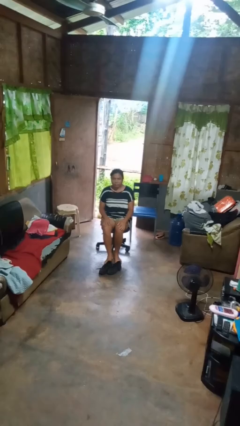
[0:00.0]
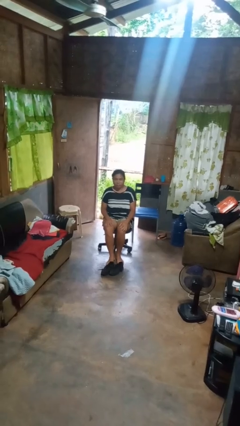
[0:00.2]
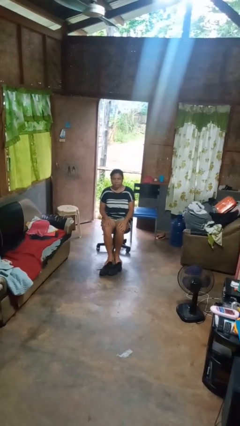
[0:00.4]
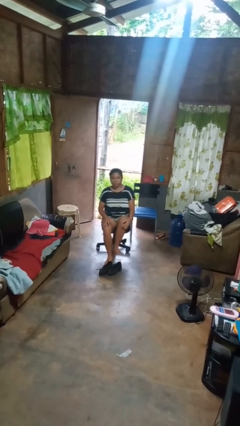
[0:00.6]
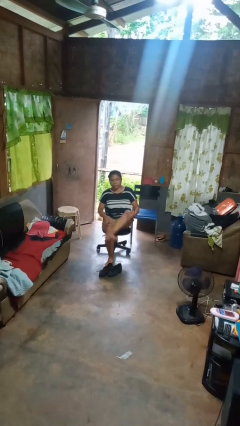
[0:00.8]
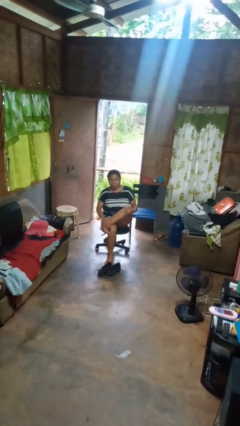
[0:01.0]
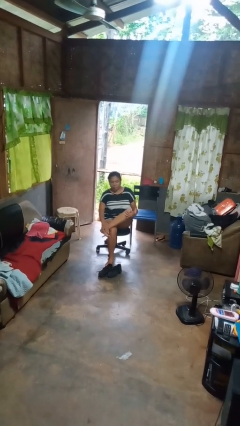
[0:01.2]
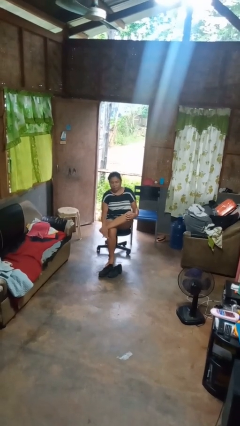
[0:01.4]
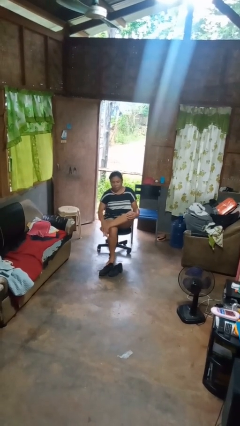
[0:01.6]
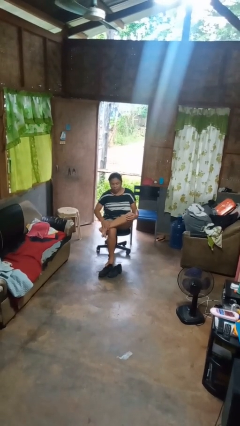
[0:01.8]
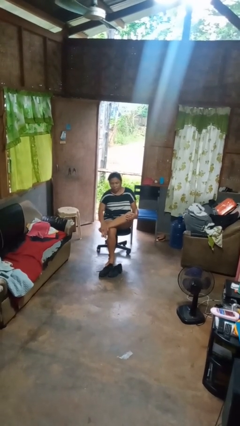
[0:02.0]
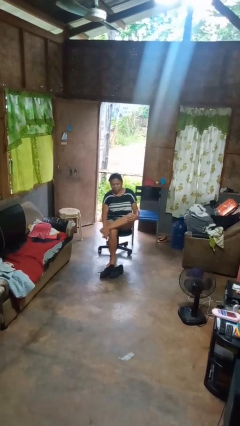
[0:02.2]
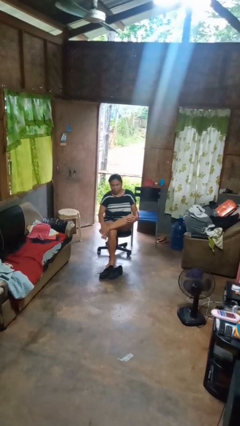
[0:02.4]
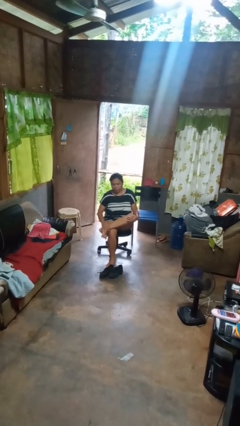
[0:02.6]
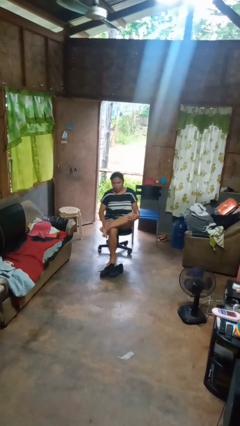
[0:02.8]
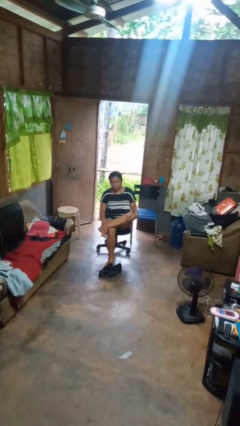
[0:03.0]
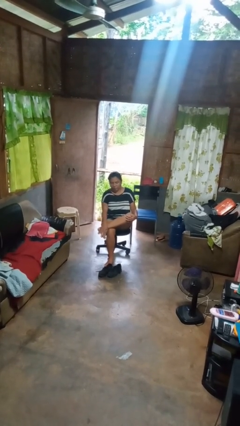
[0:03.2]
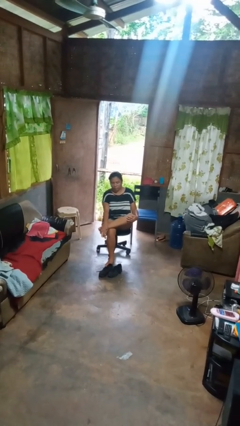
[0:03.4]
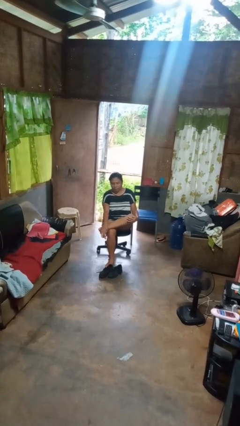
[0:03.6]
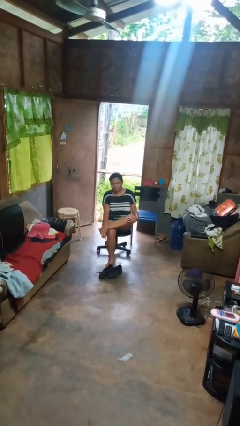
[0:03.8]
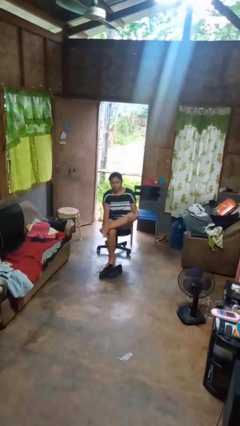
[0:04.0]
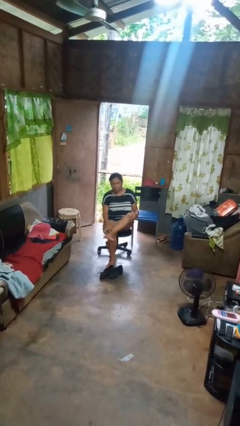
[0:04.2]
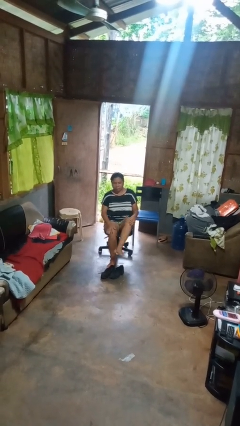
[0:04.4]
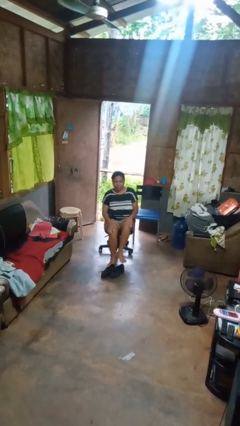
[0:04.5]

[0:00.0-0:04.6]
person rubs foot

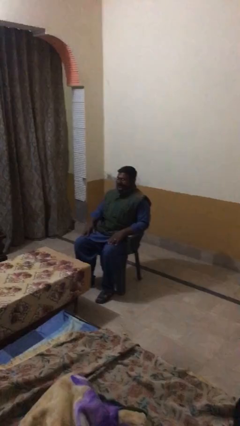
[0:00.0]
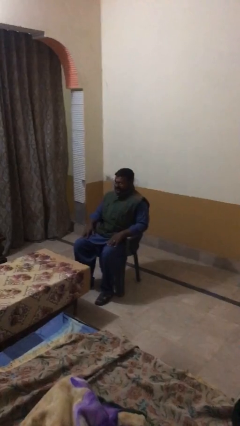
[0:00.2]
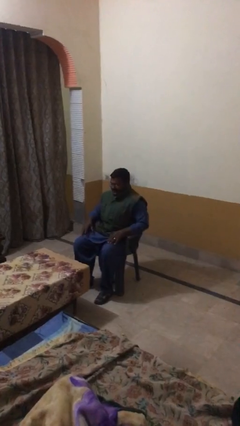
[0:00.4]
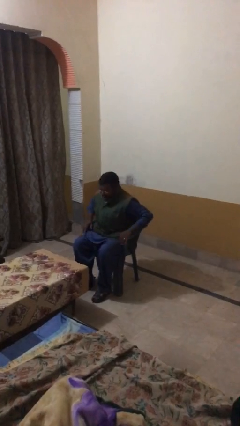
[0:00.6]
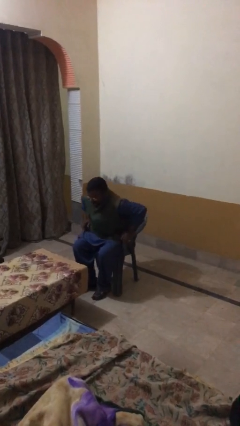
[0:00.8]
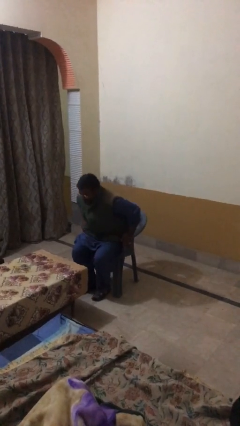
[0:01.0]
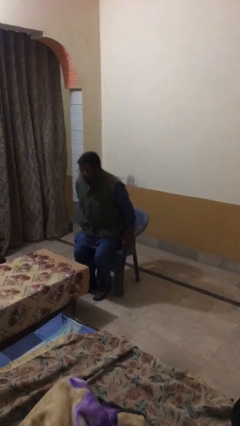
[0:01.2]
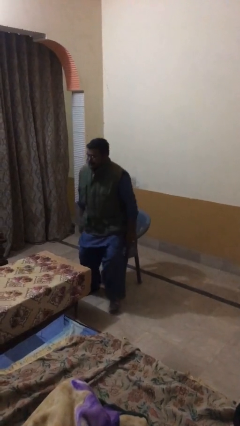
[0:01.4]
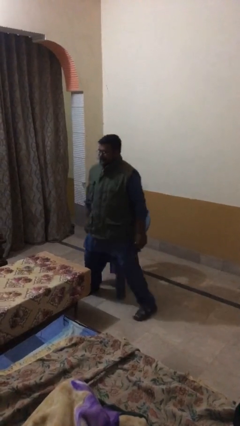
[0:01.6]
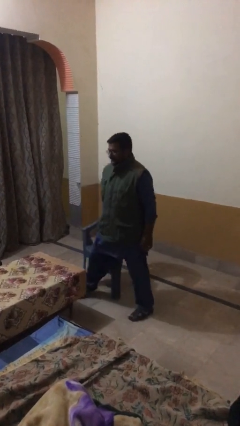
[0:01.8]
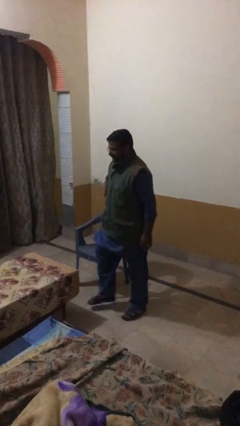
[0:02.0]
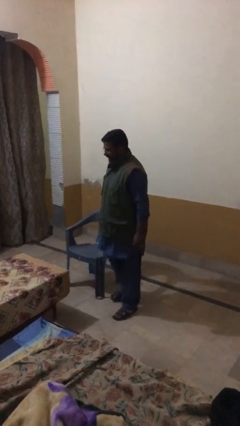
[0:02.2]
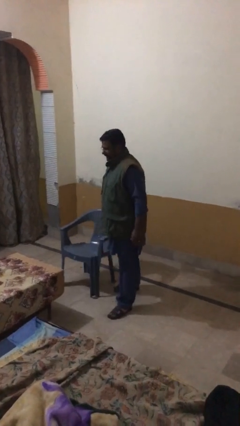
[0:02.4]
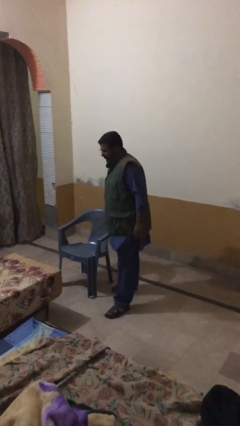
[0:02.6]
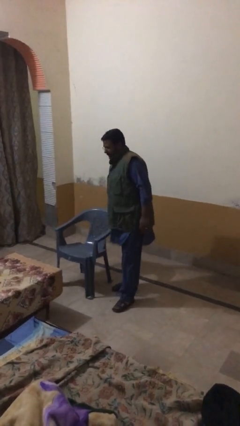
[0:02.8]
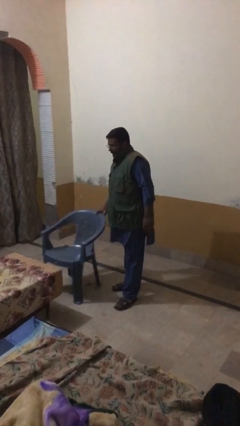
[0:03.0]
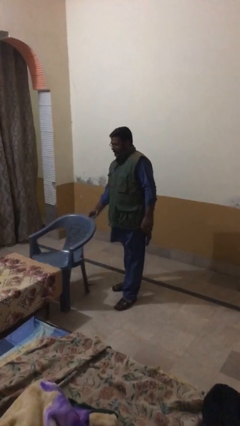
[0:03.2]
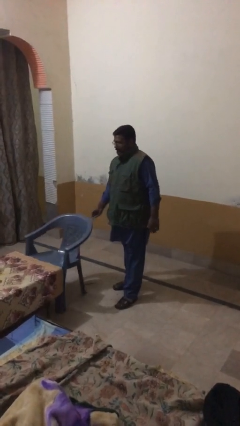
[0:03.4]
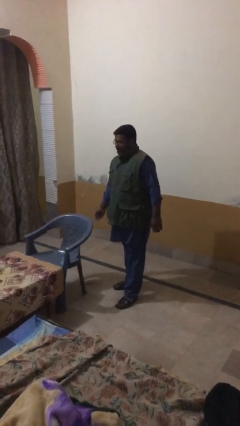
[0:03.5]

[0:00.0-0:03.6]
person stands up

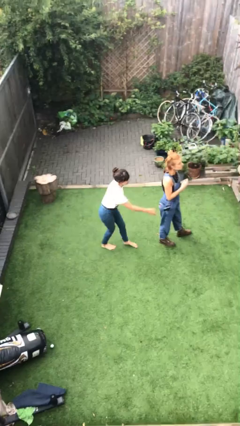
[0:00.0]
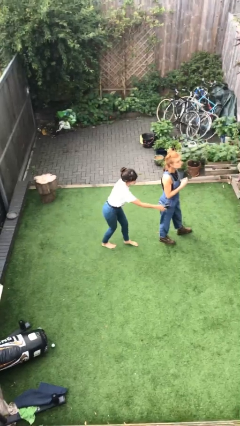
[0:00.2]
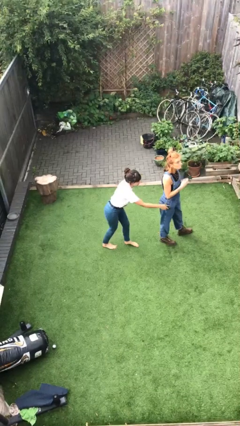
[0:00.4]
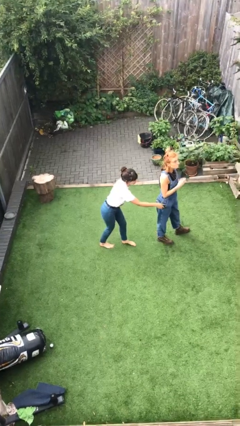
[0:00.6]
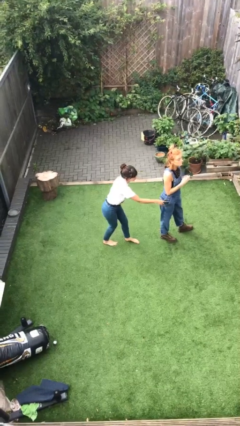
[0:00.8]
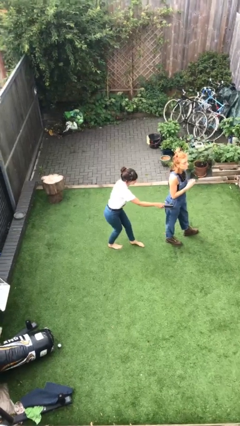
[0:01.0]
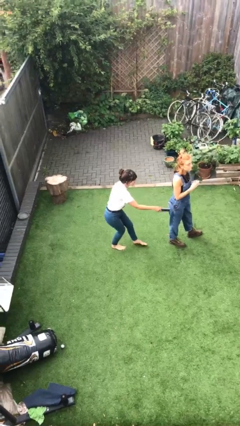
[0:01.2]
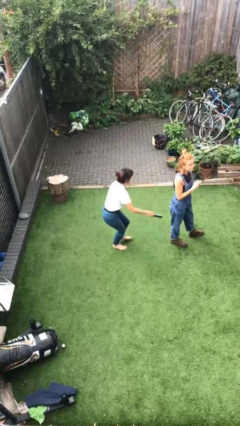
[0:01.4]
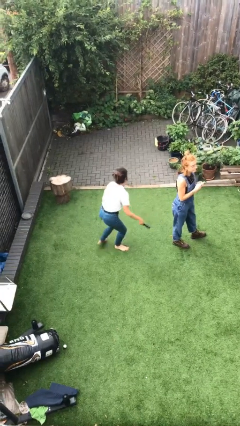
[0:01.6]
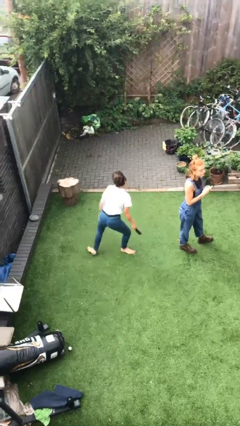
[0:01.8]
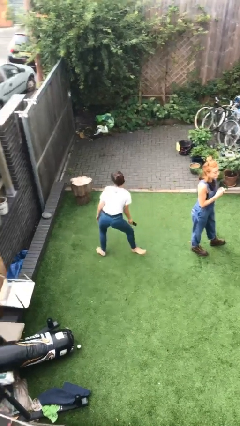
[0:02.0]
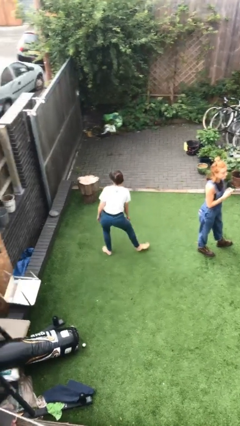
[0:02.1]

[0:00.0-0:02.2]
person steals object from person

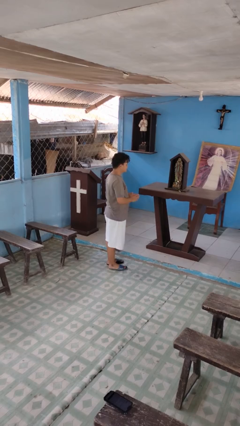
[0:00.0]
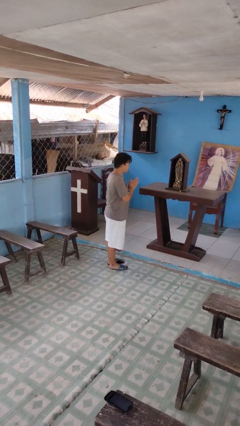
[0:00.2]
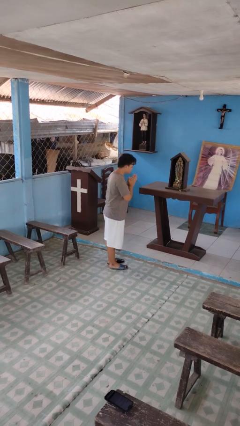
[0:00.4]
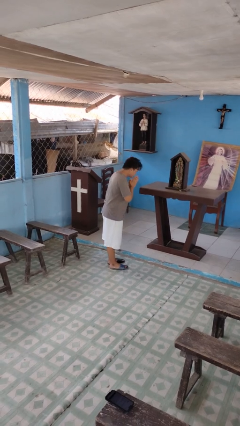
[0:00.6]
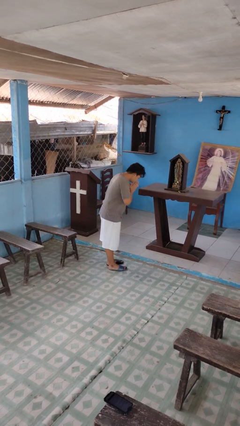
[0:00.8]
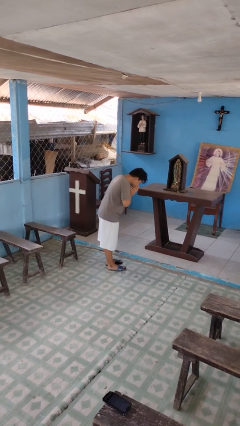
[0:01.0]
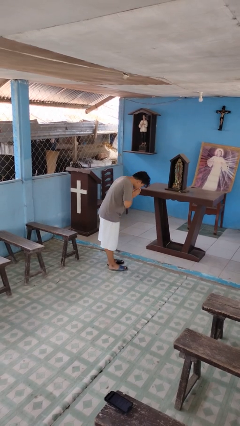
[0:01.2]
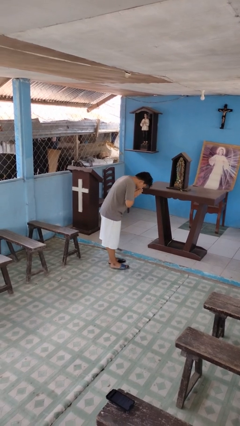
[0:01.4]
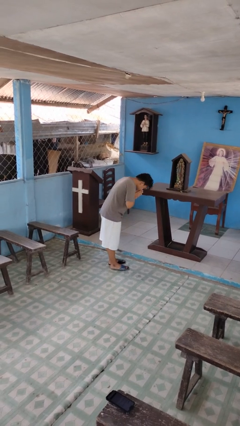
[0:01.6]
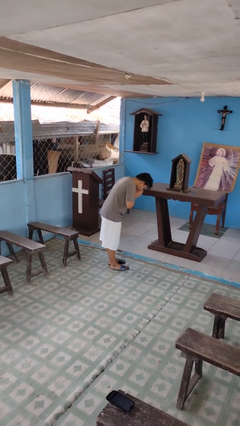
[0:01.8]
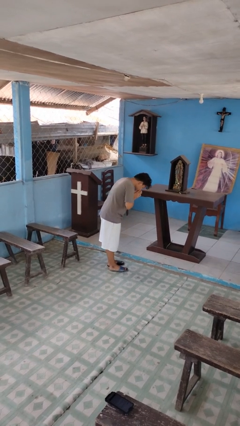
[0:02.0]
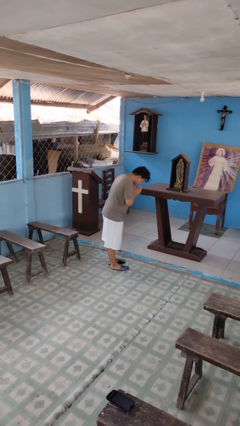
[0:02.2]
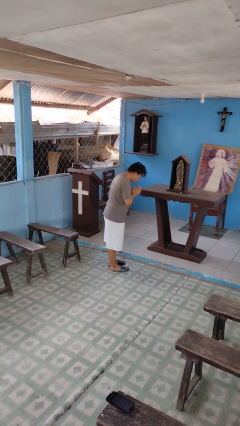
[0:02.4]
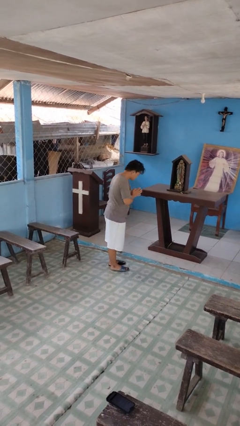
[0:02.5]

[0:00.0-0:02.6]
person prays

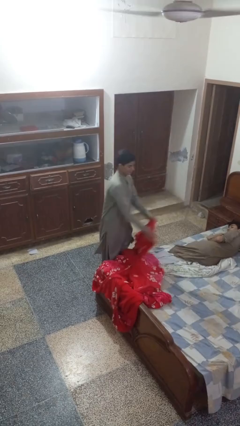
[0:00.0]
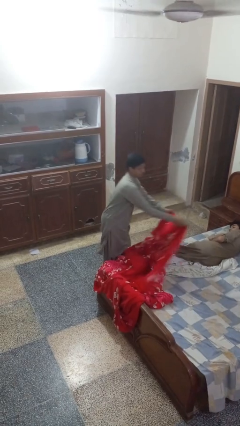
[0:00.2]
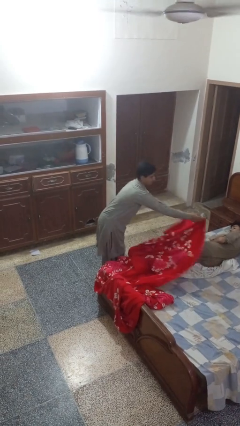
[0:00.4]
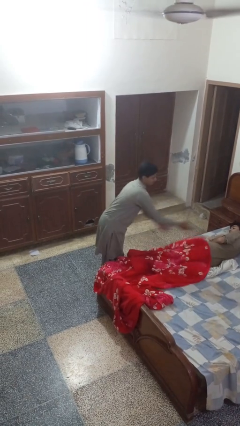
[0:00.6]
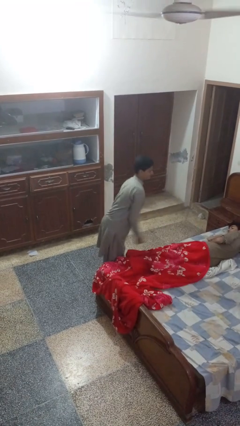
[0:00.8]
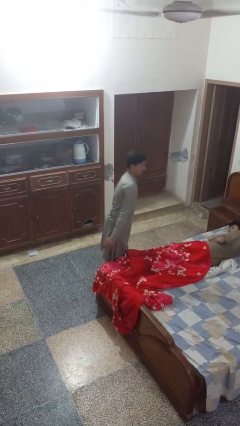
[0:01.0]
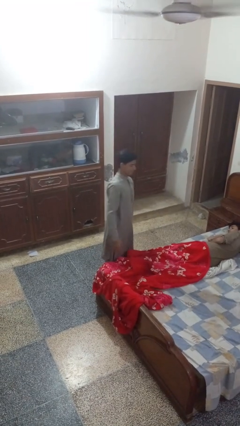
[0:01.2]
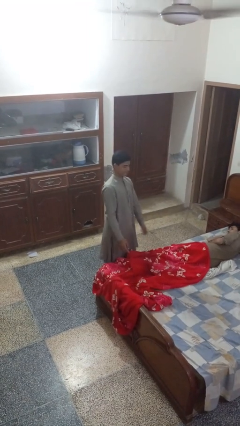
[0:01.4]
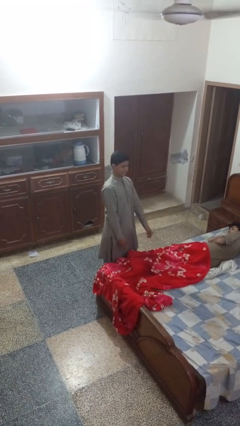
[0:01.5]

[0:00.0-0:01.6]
person covers friend with blanket

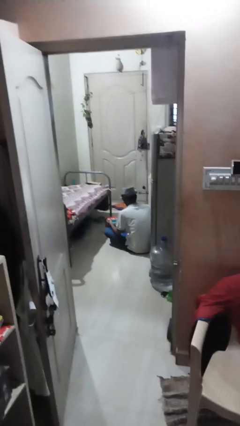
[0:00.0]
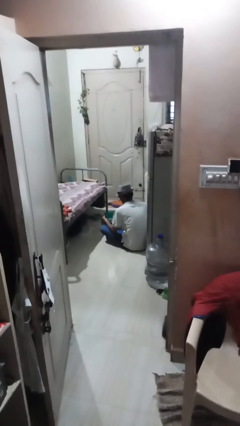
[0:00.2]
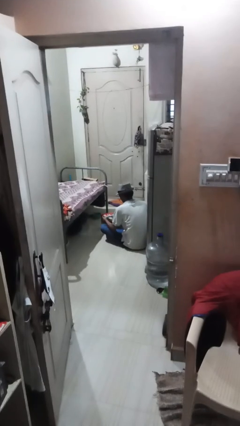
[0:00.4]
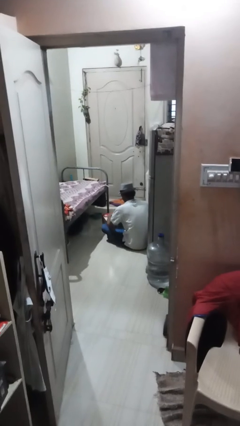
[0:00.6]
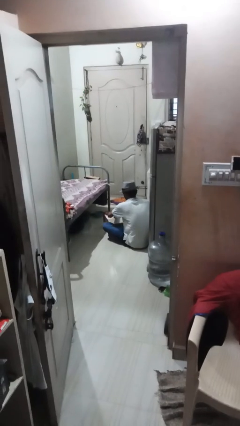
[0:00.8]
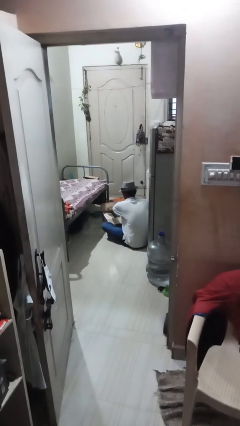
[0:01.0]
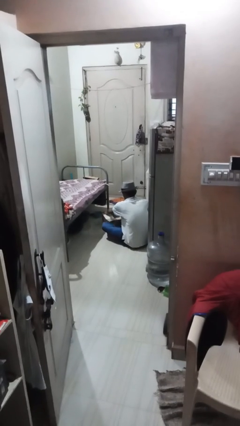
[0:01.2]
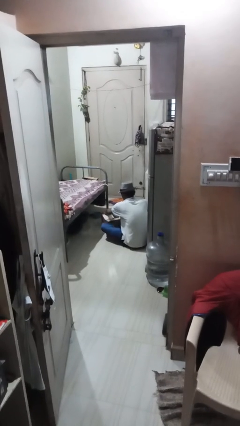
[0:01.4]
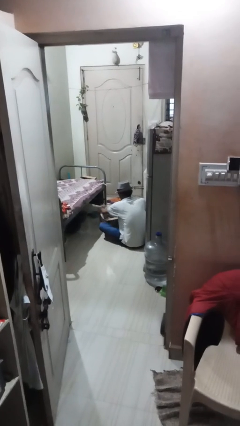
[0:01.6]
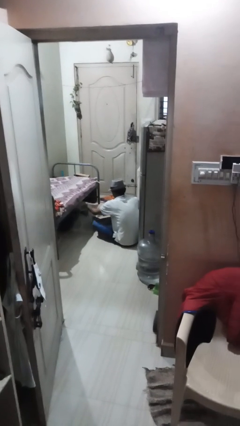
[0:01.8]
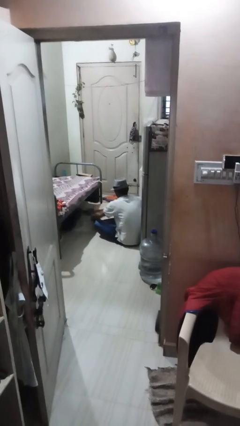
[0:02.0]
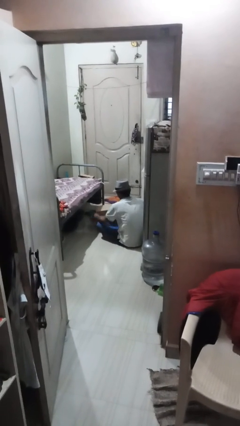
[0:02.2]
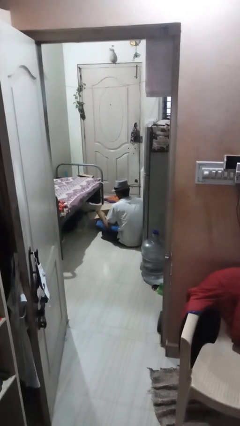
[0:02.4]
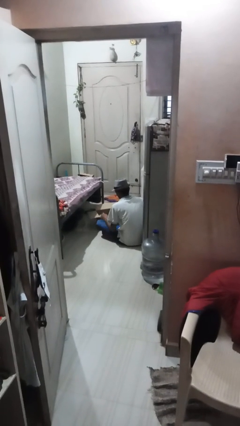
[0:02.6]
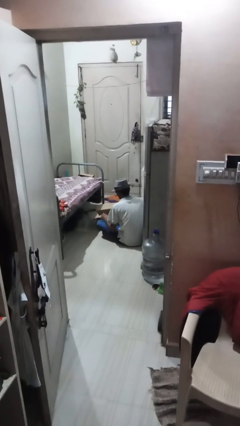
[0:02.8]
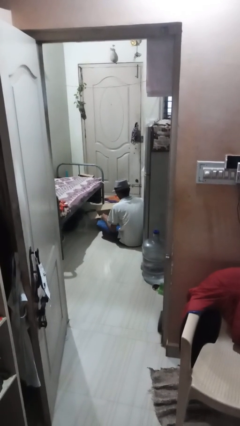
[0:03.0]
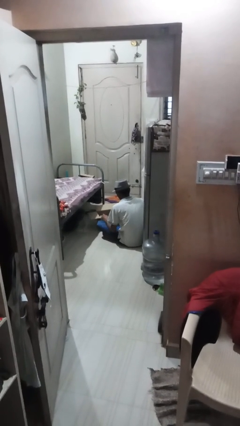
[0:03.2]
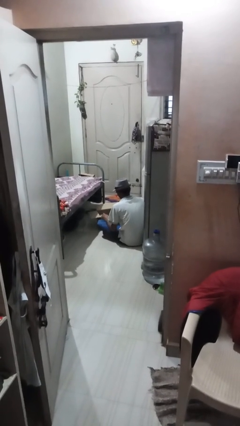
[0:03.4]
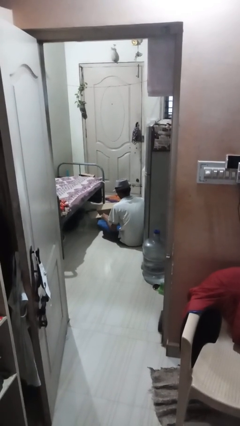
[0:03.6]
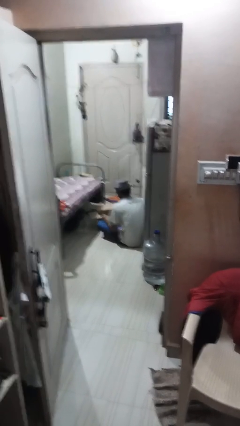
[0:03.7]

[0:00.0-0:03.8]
person opens box
